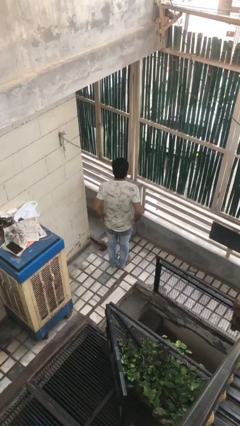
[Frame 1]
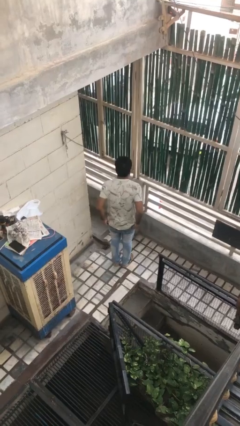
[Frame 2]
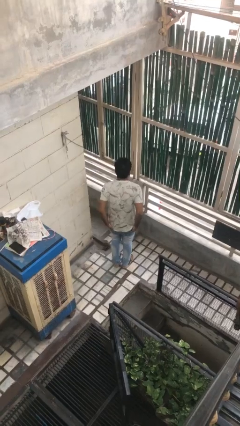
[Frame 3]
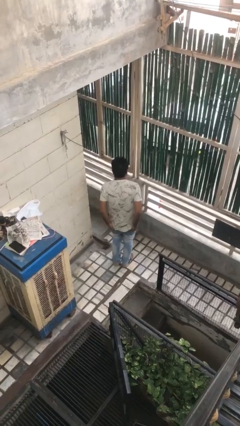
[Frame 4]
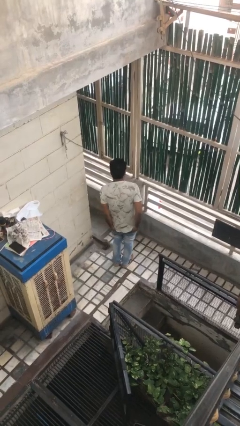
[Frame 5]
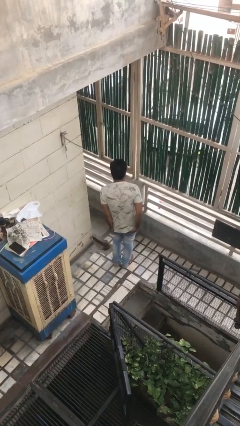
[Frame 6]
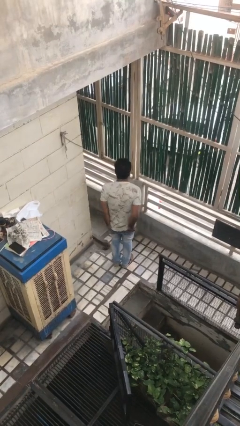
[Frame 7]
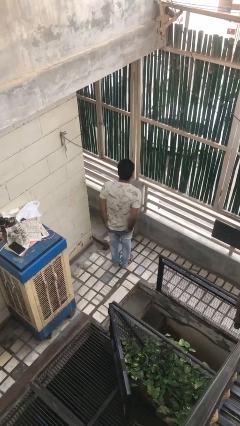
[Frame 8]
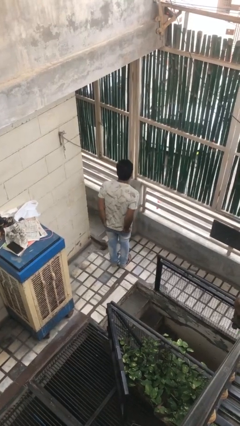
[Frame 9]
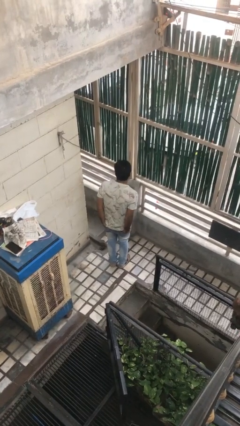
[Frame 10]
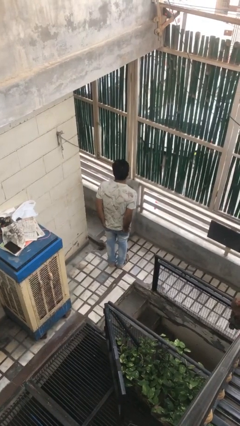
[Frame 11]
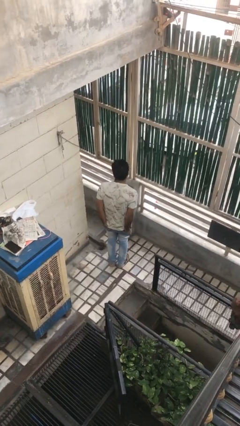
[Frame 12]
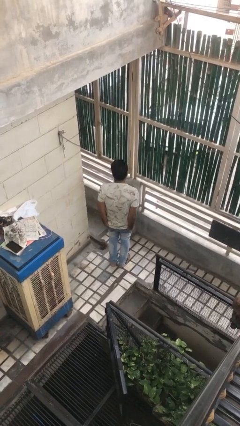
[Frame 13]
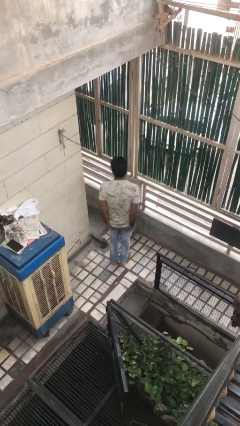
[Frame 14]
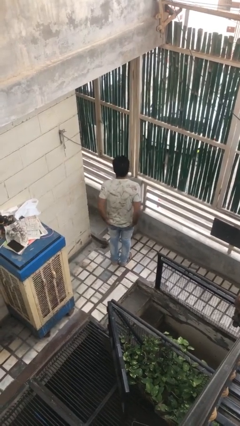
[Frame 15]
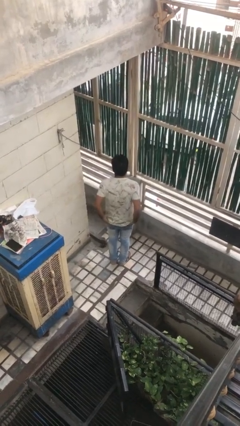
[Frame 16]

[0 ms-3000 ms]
person puts hands in back pockets

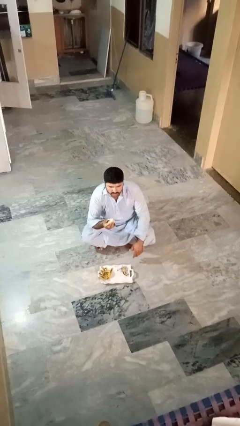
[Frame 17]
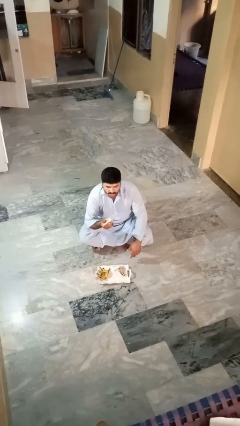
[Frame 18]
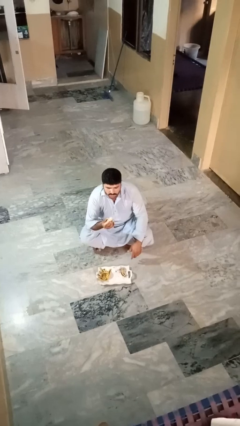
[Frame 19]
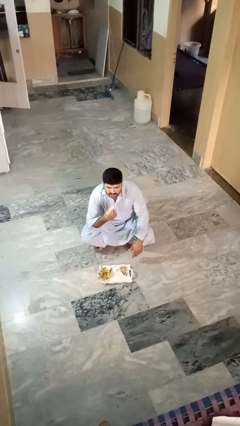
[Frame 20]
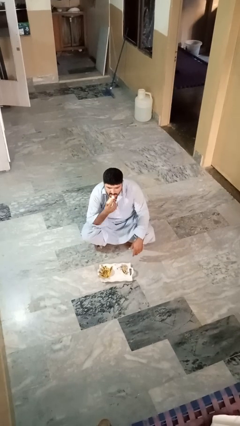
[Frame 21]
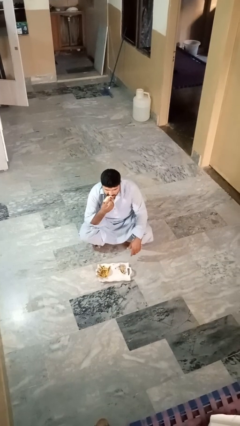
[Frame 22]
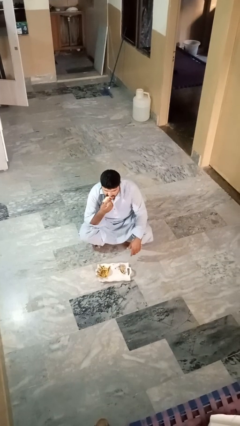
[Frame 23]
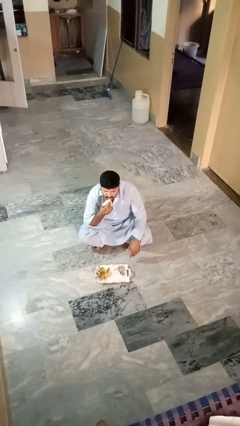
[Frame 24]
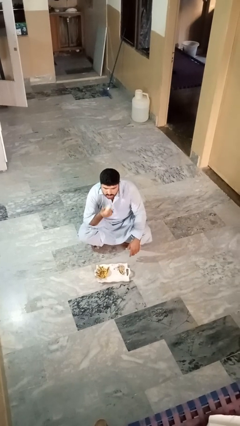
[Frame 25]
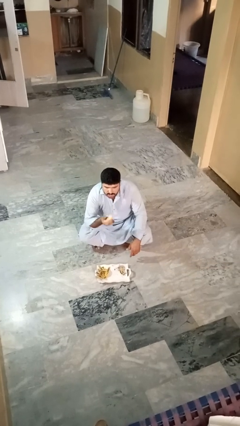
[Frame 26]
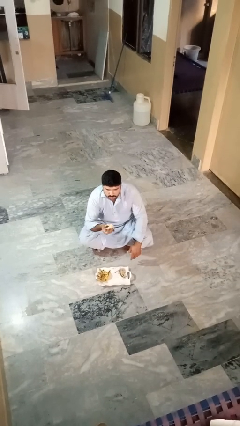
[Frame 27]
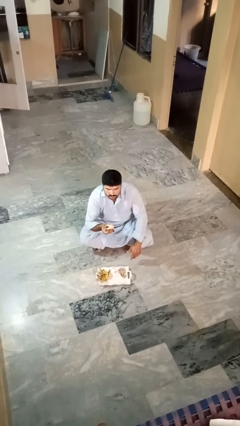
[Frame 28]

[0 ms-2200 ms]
person eats banana

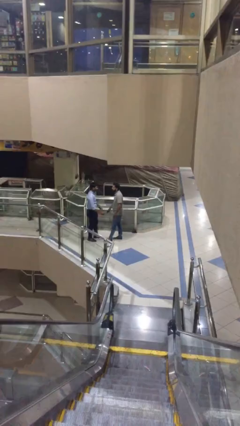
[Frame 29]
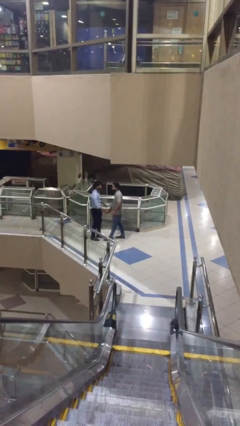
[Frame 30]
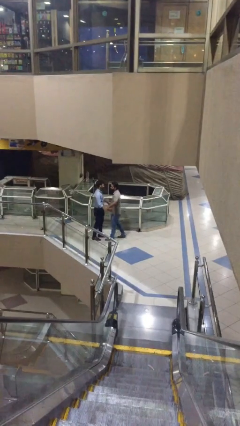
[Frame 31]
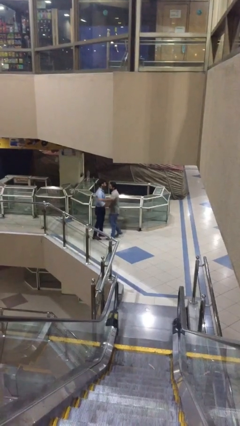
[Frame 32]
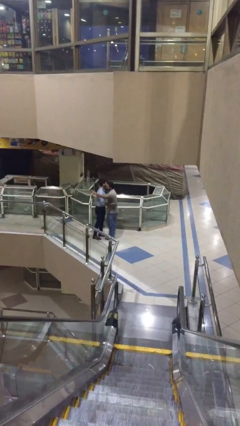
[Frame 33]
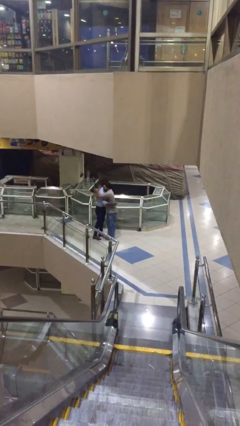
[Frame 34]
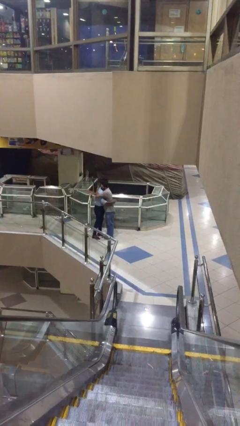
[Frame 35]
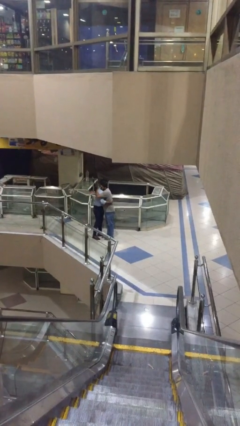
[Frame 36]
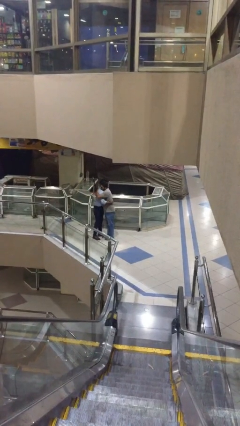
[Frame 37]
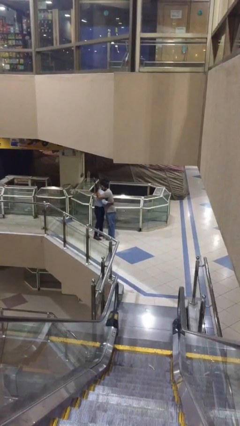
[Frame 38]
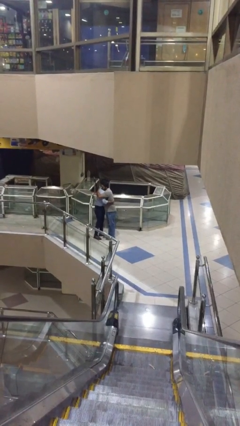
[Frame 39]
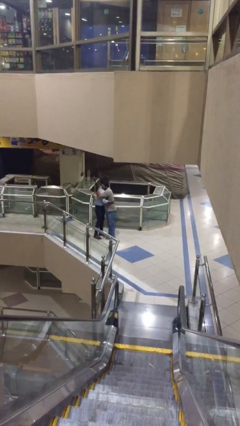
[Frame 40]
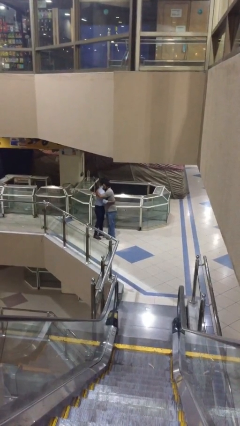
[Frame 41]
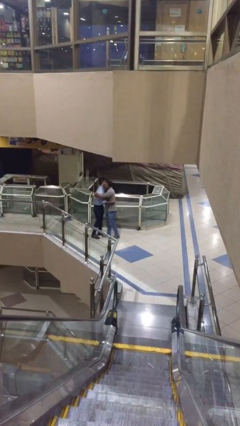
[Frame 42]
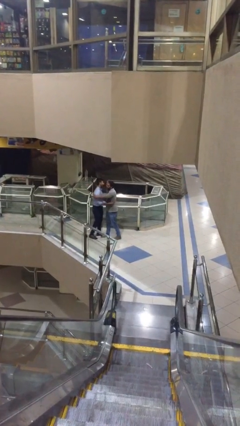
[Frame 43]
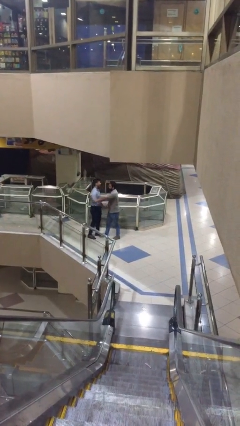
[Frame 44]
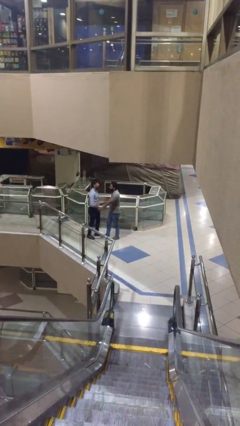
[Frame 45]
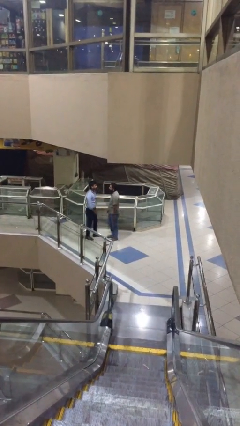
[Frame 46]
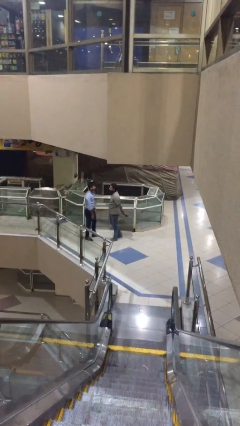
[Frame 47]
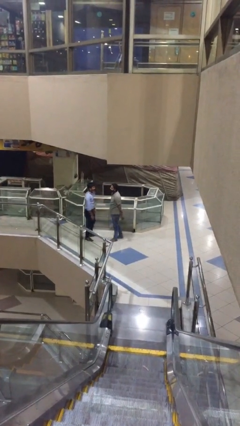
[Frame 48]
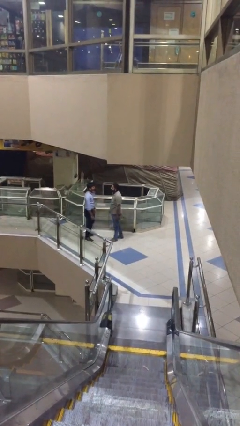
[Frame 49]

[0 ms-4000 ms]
person embraces person

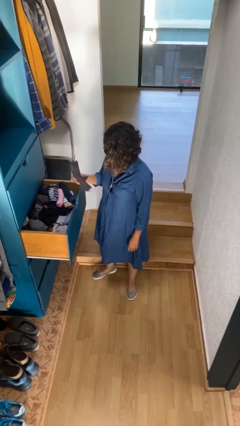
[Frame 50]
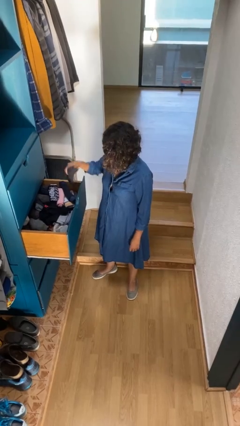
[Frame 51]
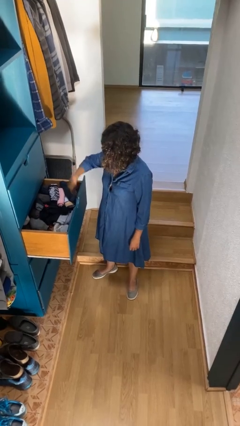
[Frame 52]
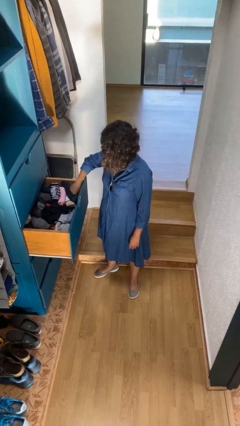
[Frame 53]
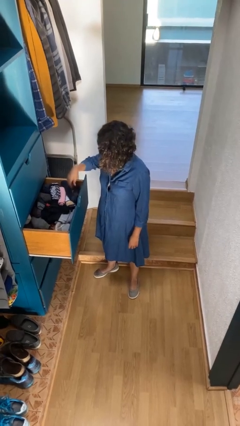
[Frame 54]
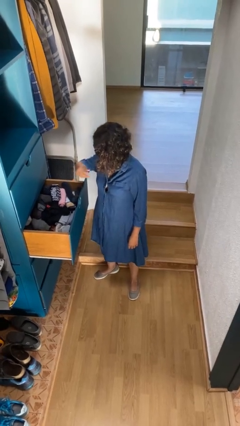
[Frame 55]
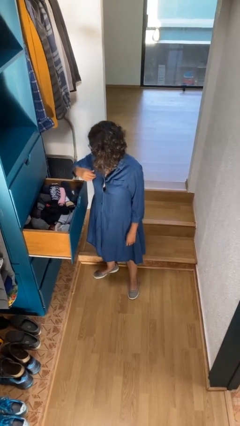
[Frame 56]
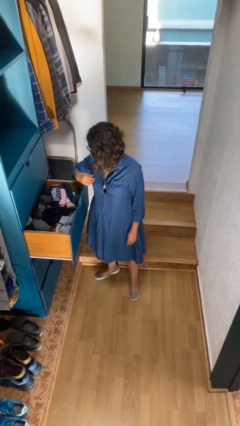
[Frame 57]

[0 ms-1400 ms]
person puts clothes into dresser

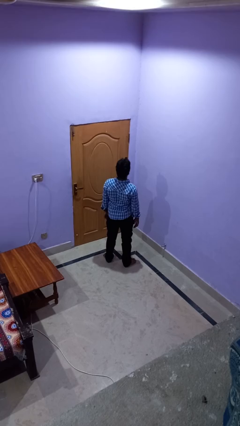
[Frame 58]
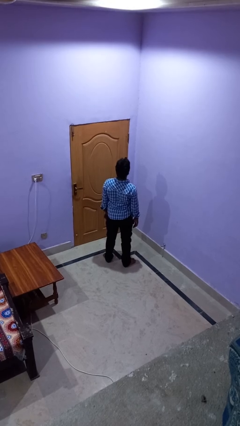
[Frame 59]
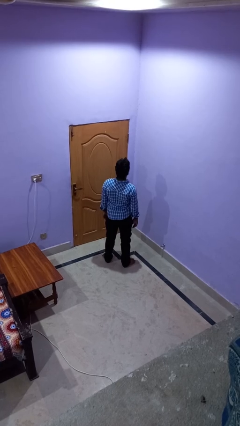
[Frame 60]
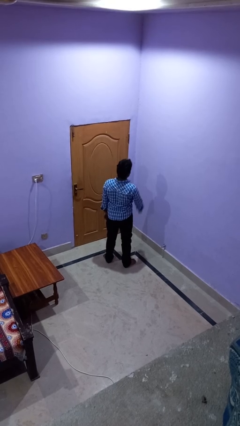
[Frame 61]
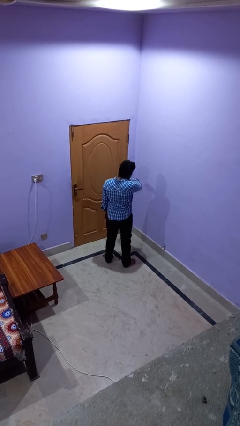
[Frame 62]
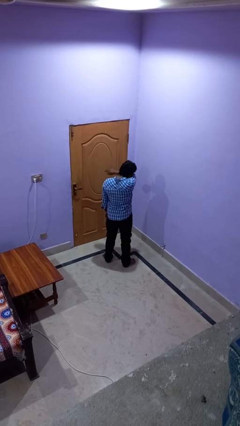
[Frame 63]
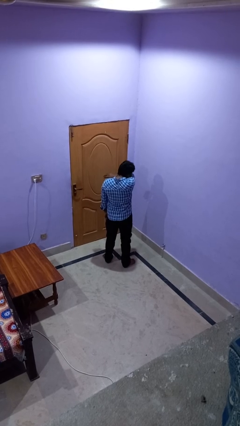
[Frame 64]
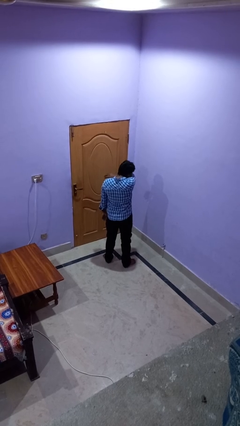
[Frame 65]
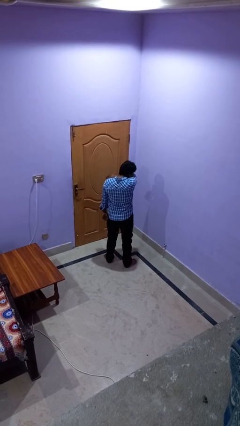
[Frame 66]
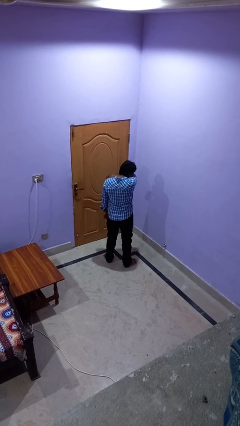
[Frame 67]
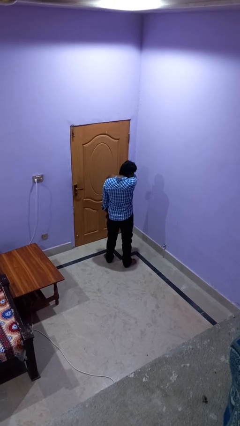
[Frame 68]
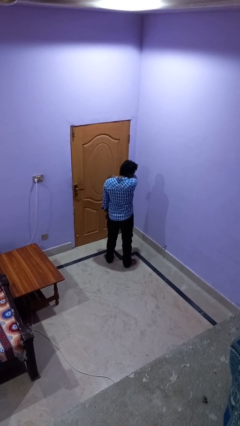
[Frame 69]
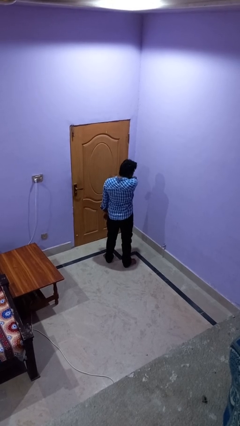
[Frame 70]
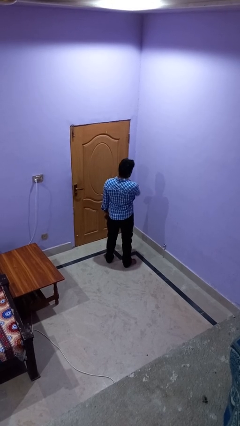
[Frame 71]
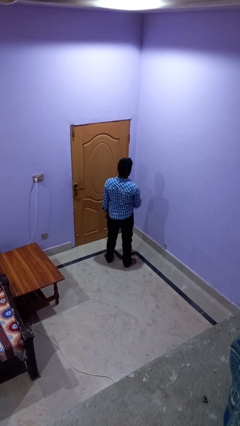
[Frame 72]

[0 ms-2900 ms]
person sneezes into arm

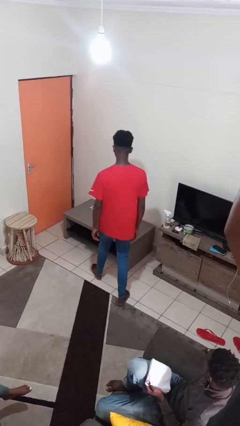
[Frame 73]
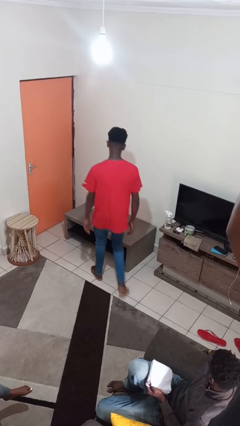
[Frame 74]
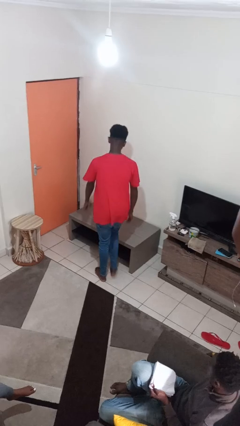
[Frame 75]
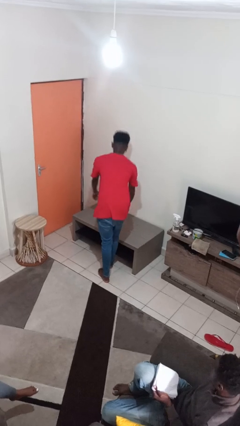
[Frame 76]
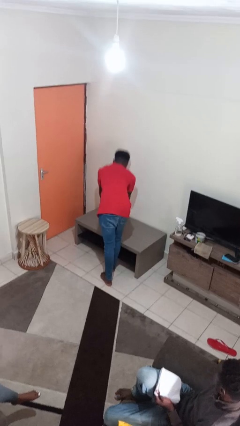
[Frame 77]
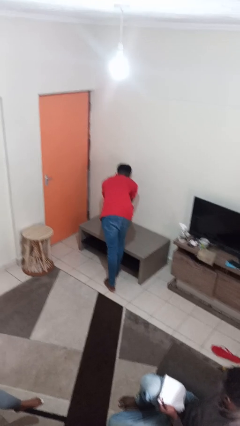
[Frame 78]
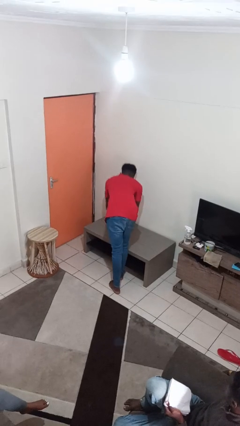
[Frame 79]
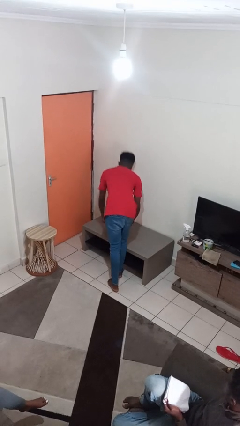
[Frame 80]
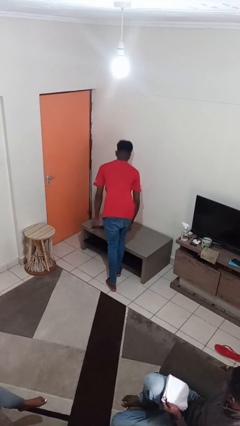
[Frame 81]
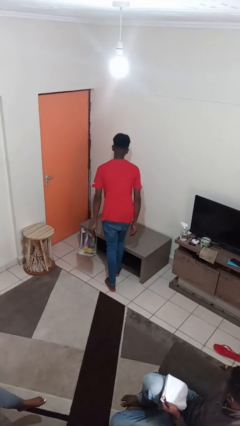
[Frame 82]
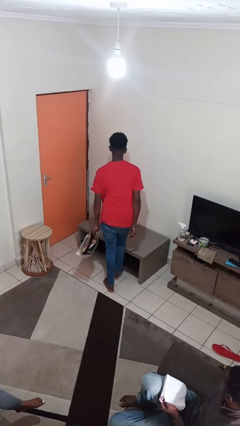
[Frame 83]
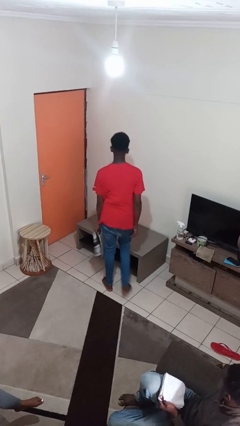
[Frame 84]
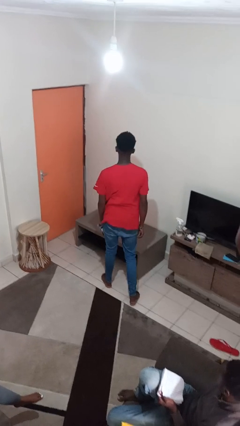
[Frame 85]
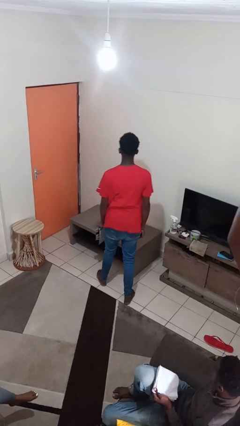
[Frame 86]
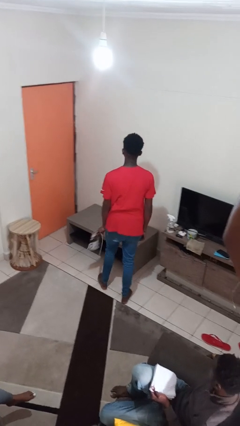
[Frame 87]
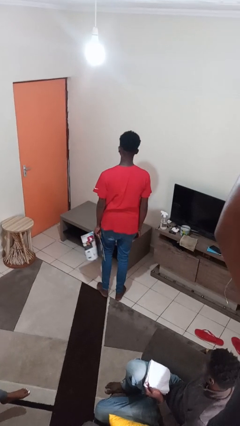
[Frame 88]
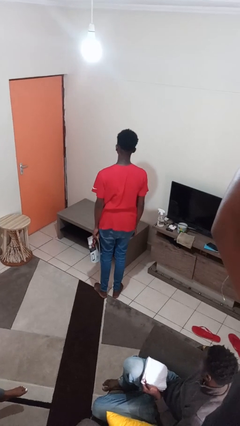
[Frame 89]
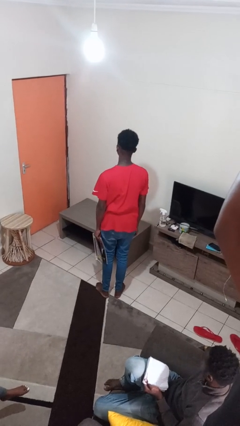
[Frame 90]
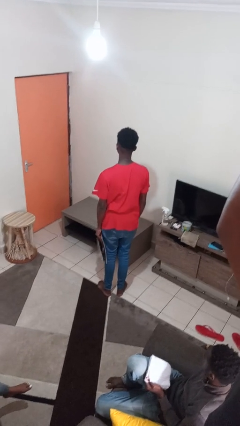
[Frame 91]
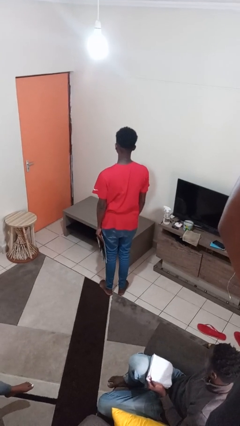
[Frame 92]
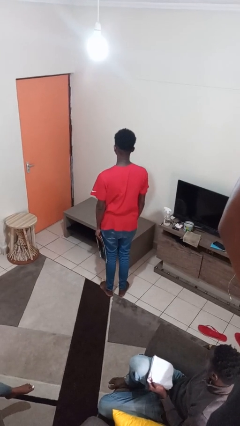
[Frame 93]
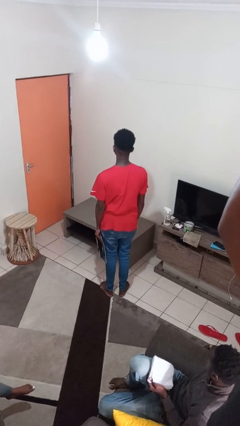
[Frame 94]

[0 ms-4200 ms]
person picks up object from table
